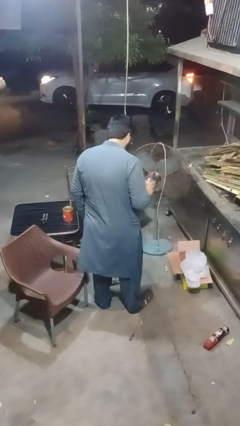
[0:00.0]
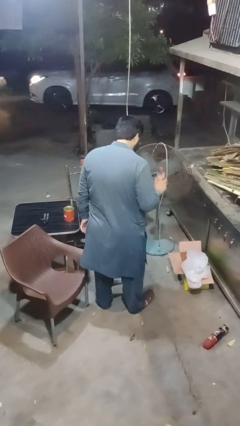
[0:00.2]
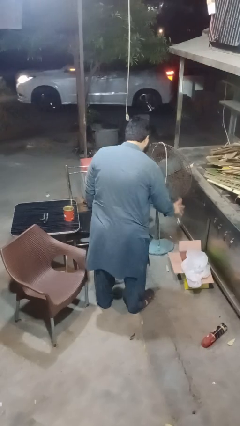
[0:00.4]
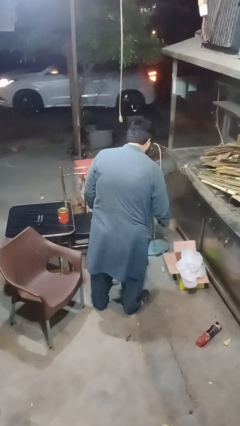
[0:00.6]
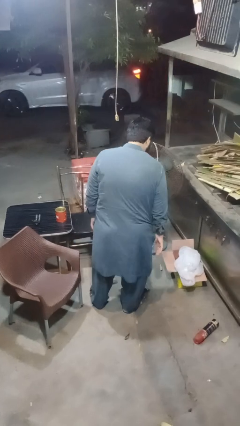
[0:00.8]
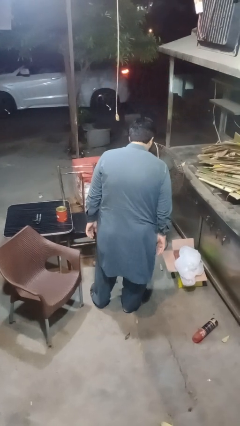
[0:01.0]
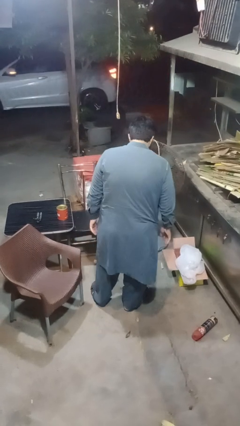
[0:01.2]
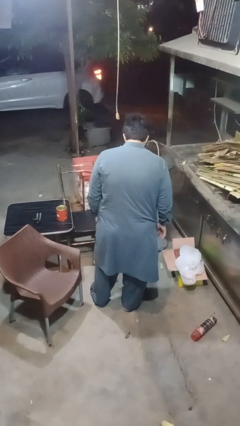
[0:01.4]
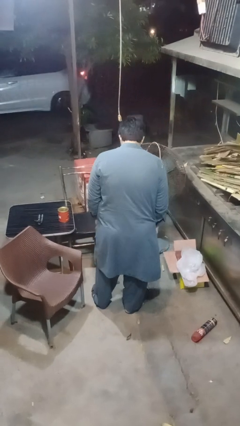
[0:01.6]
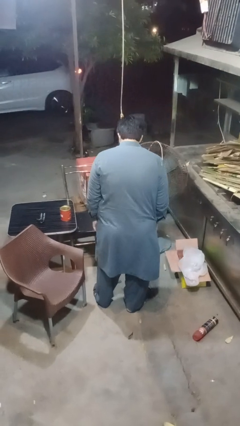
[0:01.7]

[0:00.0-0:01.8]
person discards trash

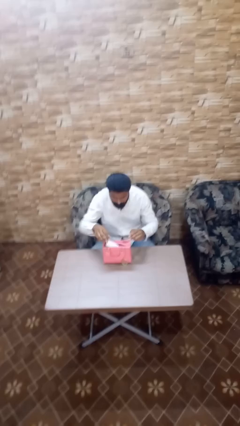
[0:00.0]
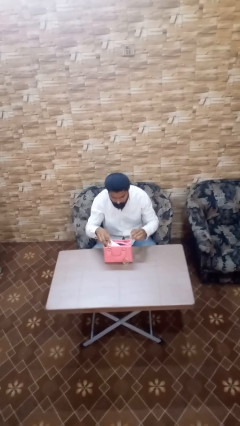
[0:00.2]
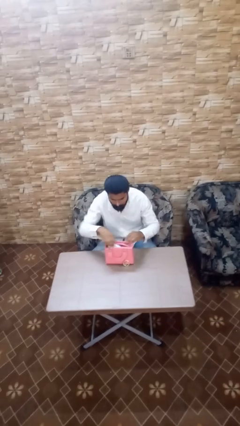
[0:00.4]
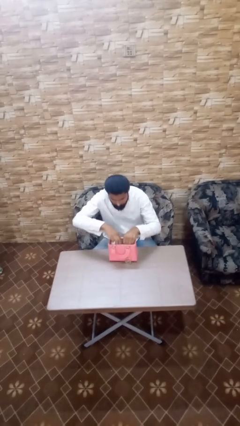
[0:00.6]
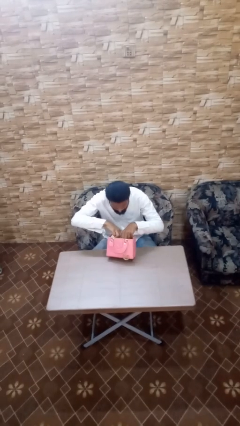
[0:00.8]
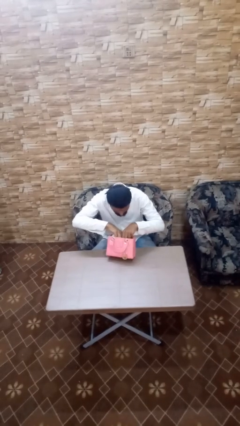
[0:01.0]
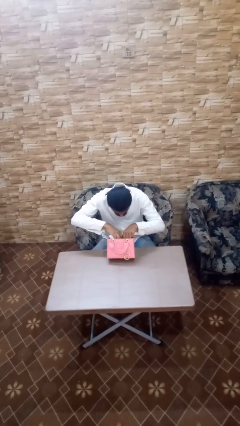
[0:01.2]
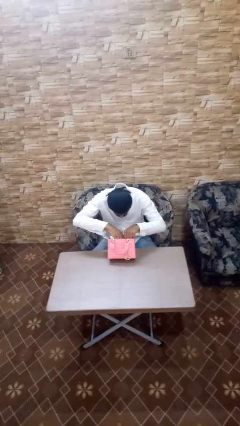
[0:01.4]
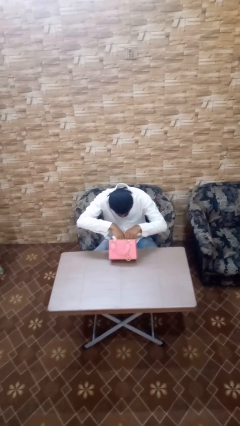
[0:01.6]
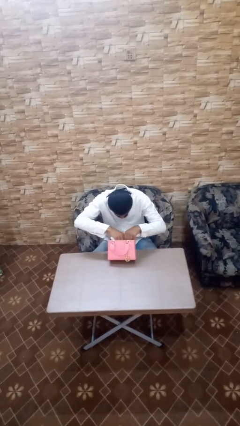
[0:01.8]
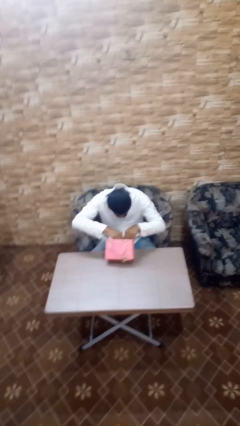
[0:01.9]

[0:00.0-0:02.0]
person searches in purse

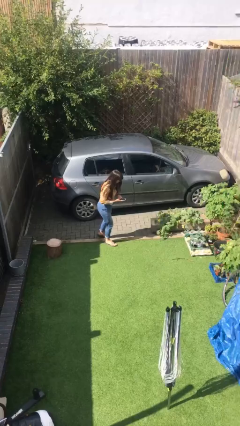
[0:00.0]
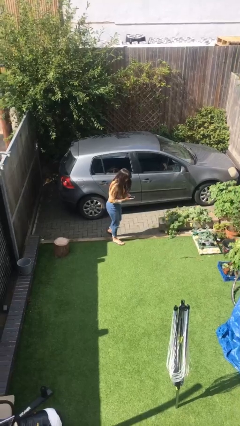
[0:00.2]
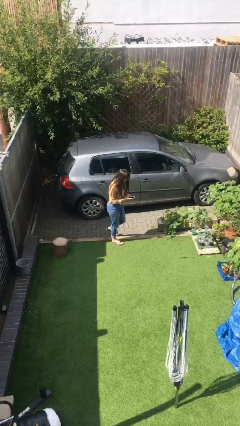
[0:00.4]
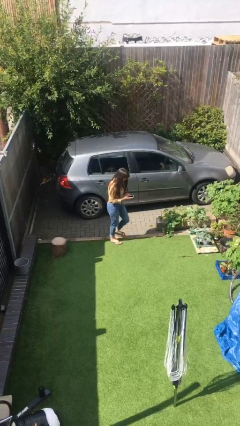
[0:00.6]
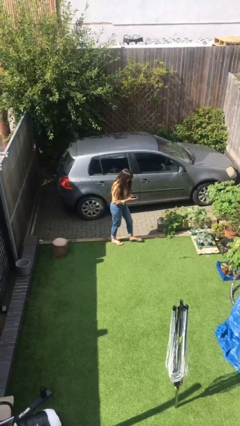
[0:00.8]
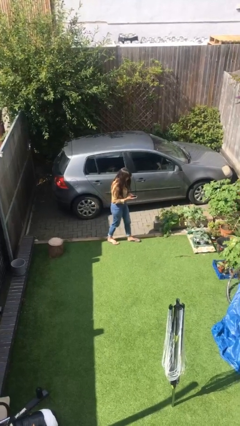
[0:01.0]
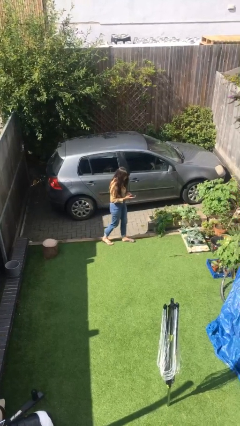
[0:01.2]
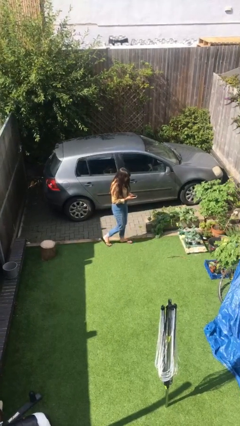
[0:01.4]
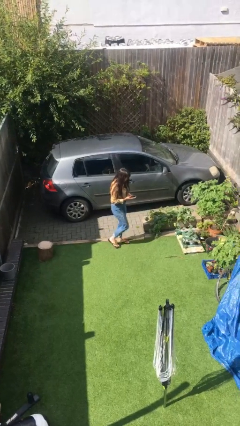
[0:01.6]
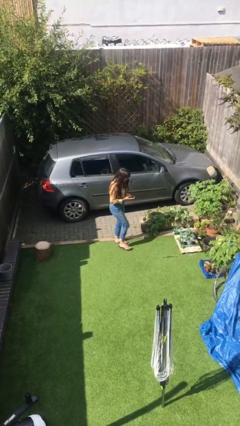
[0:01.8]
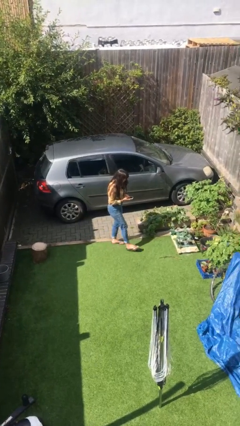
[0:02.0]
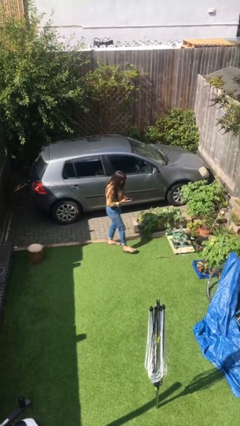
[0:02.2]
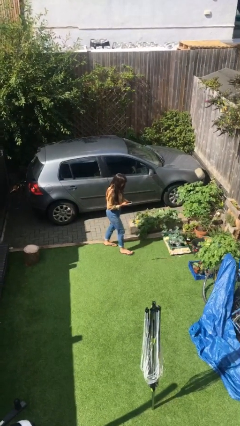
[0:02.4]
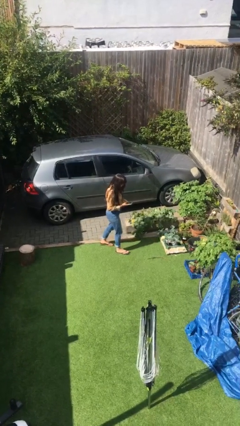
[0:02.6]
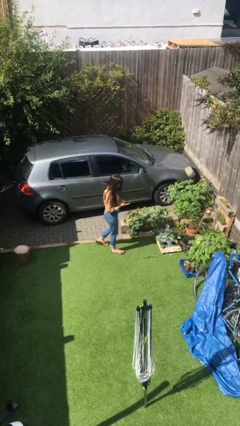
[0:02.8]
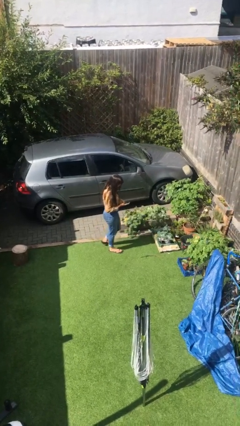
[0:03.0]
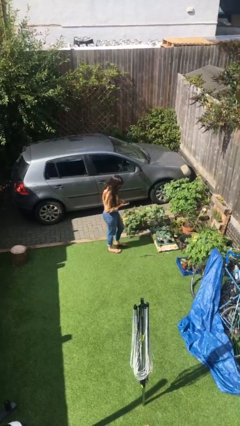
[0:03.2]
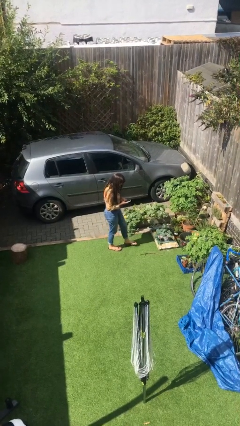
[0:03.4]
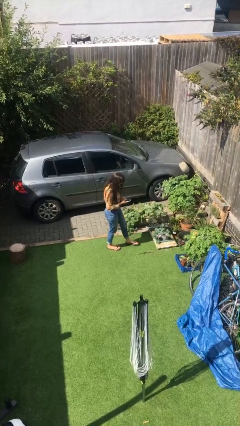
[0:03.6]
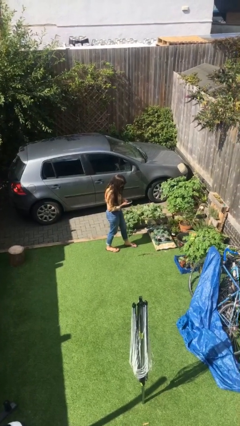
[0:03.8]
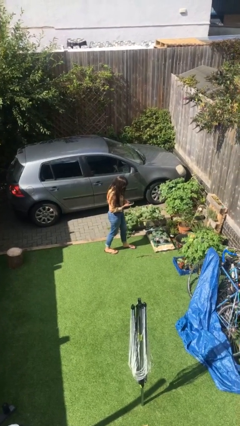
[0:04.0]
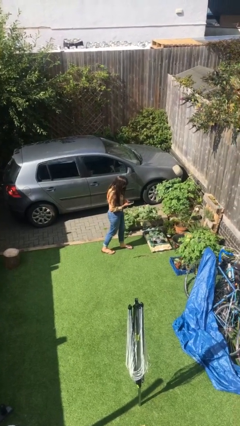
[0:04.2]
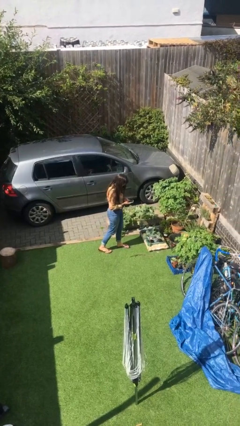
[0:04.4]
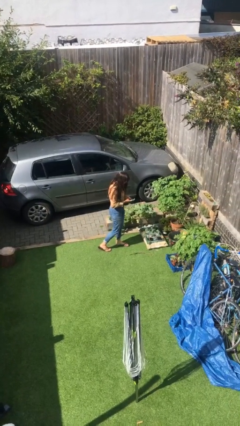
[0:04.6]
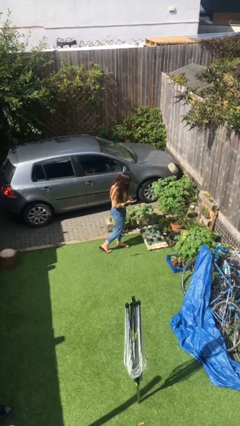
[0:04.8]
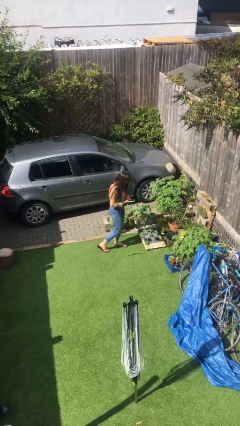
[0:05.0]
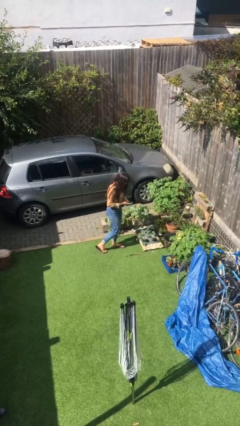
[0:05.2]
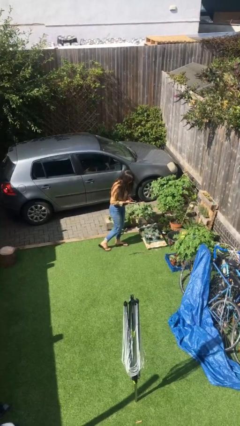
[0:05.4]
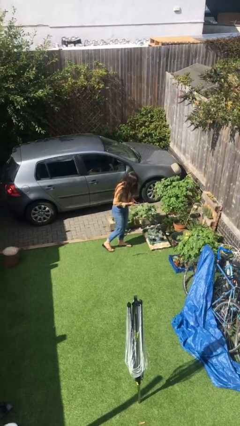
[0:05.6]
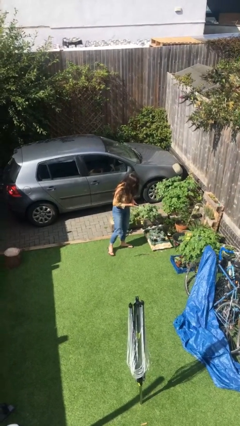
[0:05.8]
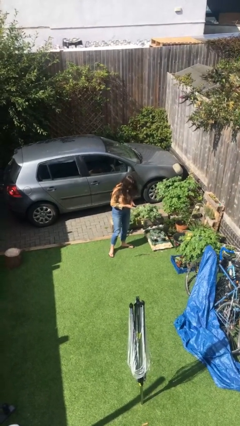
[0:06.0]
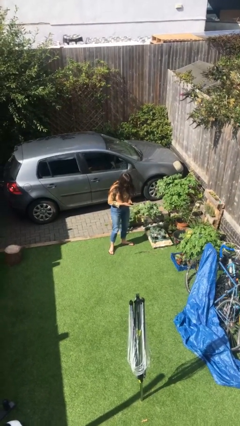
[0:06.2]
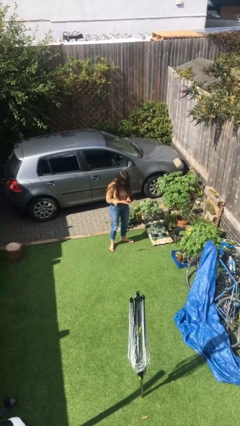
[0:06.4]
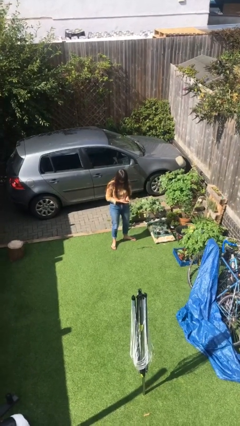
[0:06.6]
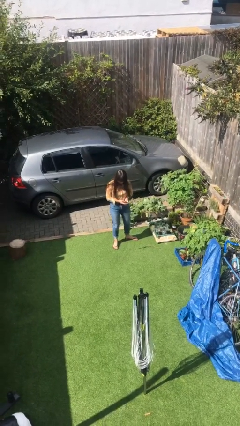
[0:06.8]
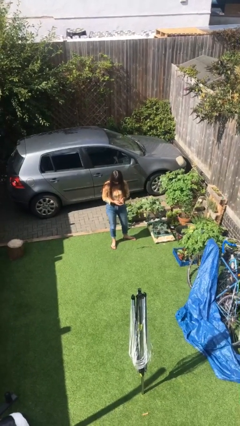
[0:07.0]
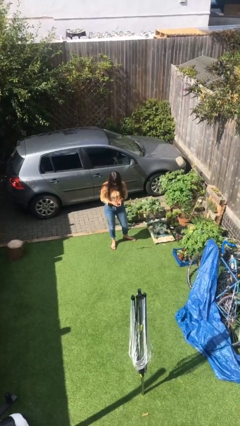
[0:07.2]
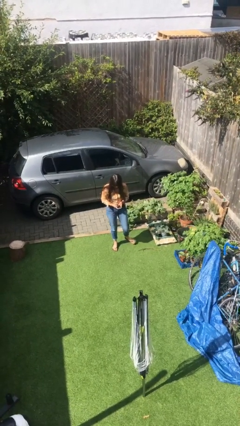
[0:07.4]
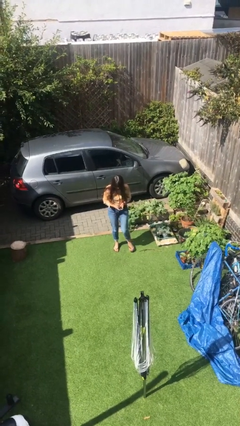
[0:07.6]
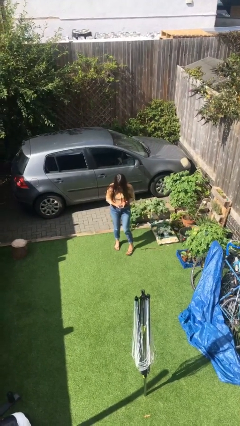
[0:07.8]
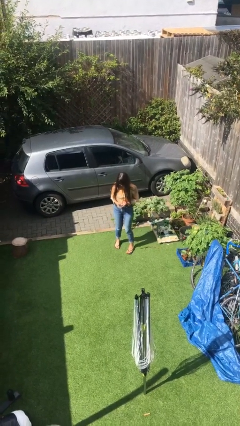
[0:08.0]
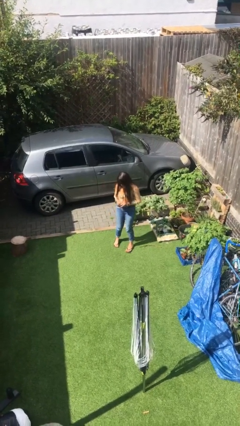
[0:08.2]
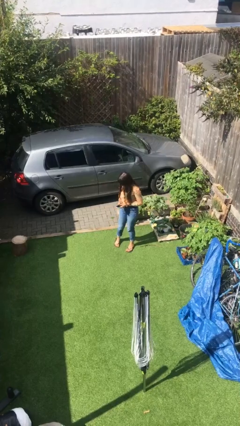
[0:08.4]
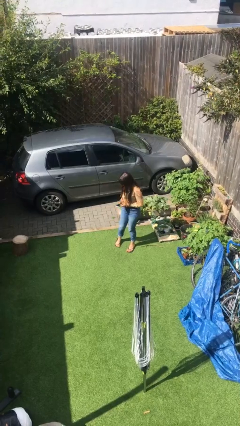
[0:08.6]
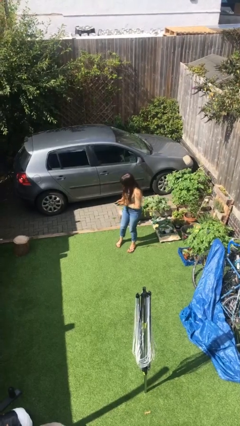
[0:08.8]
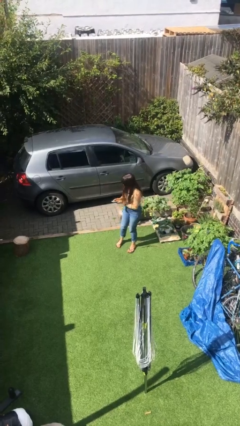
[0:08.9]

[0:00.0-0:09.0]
person texts on phone

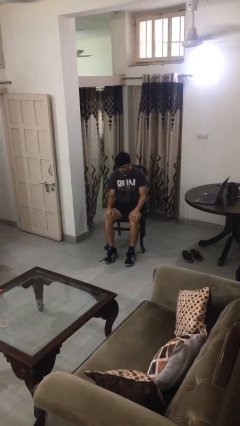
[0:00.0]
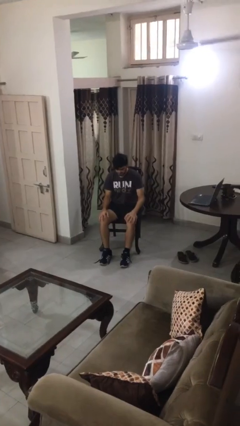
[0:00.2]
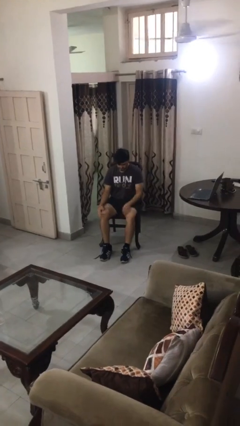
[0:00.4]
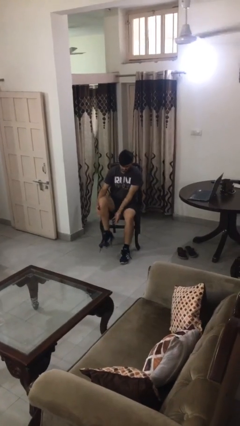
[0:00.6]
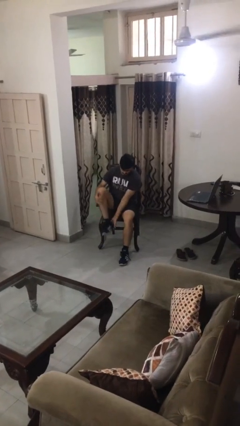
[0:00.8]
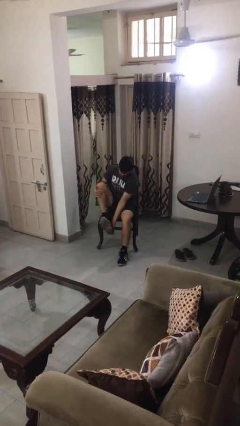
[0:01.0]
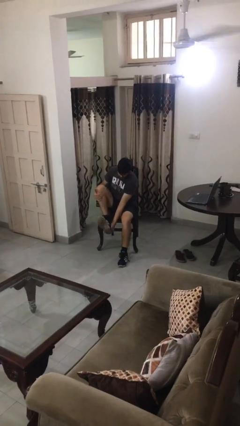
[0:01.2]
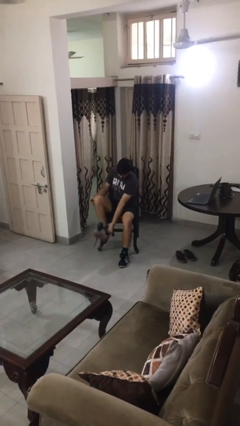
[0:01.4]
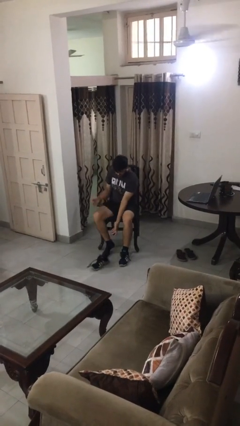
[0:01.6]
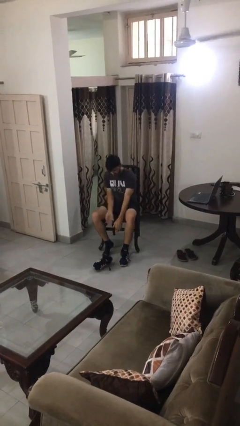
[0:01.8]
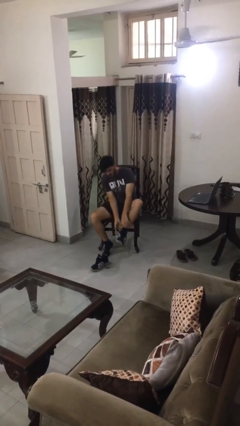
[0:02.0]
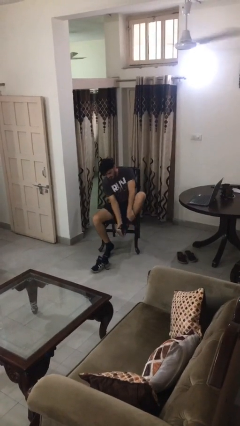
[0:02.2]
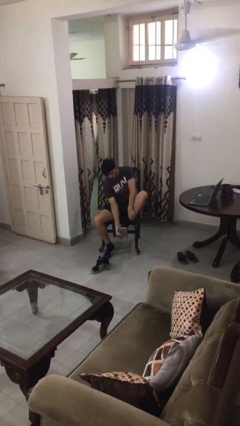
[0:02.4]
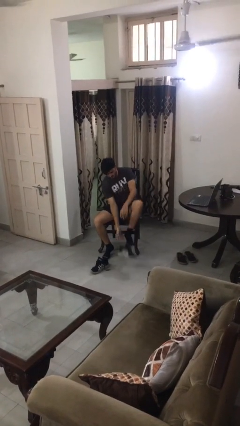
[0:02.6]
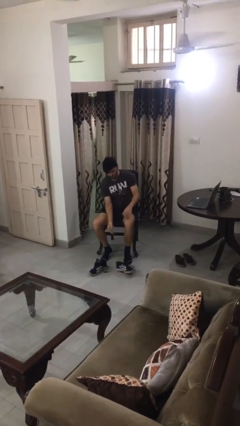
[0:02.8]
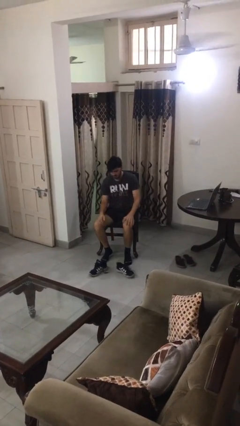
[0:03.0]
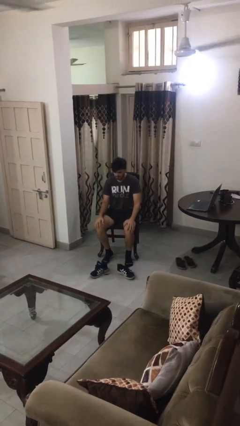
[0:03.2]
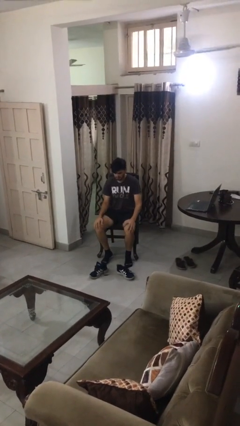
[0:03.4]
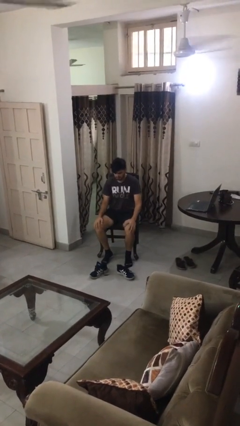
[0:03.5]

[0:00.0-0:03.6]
person takes off shoes

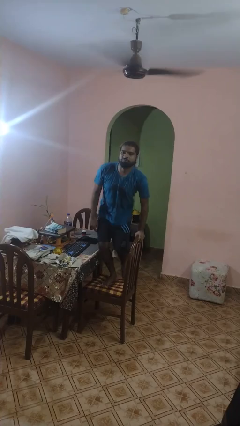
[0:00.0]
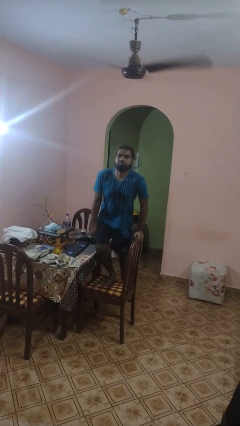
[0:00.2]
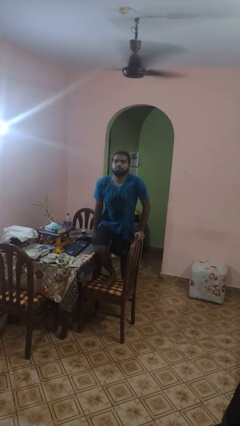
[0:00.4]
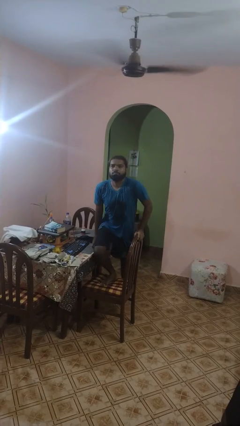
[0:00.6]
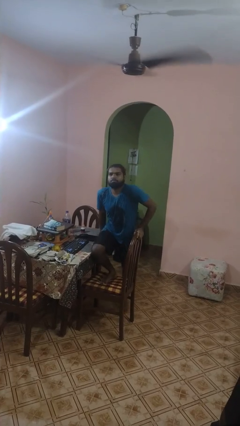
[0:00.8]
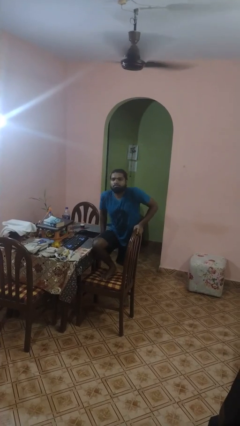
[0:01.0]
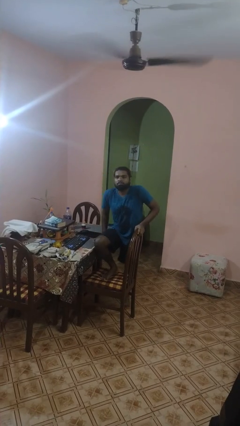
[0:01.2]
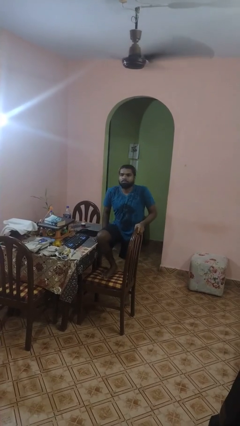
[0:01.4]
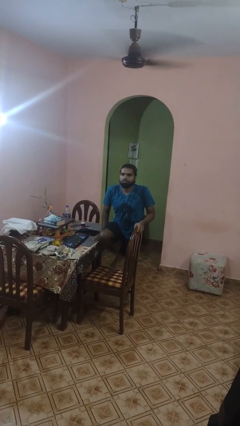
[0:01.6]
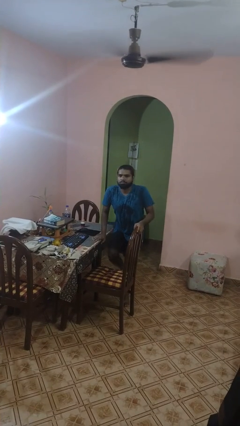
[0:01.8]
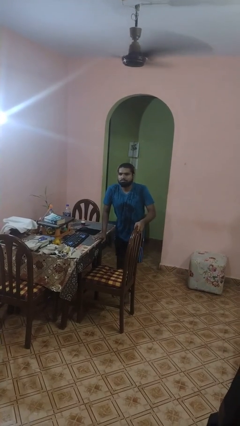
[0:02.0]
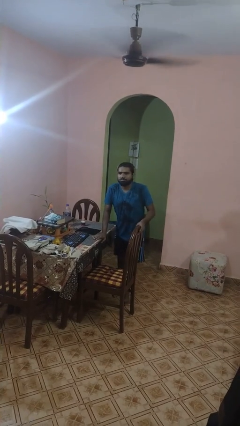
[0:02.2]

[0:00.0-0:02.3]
person climbs off chair
